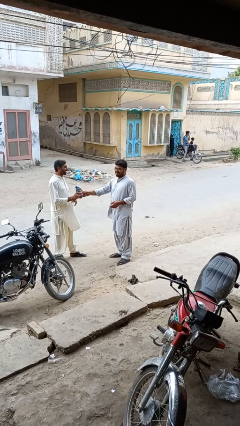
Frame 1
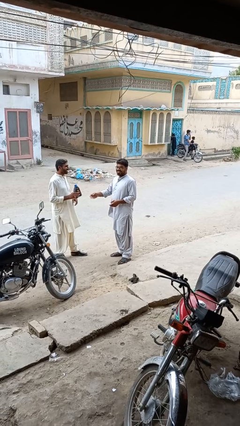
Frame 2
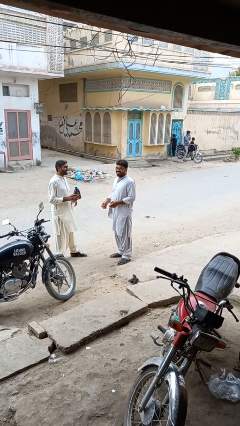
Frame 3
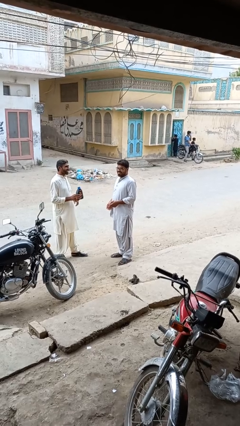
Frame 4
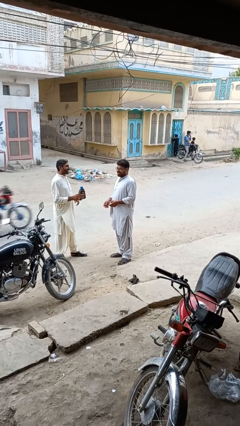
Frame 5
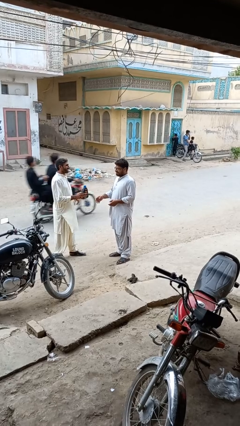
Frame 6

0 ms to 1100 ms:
person transfers object to person

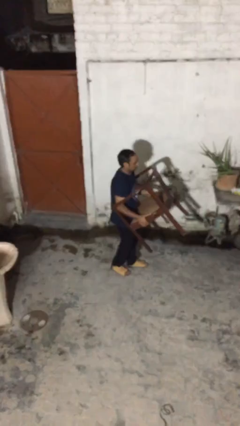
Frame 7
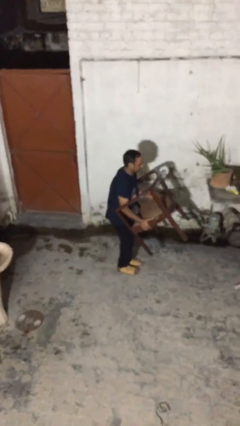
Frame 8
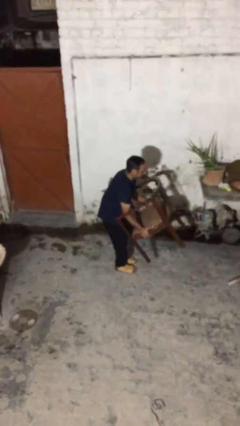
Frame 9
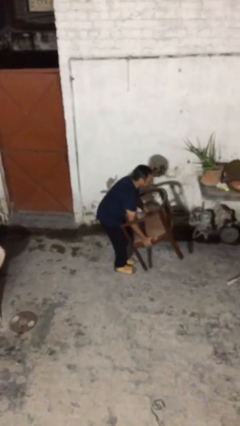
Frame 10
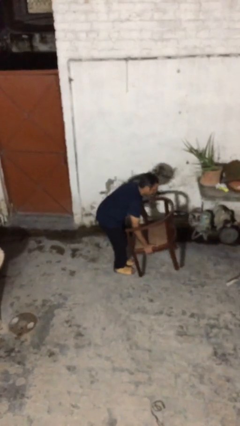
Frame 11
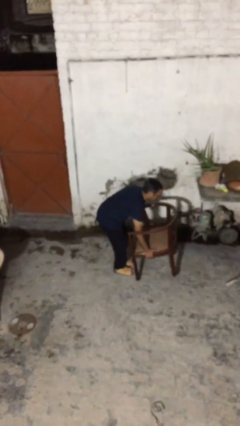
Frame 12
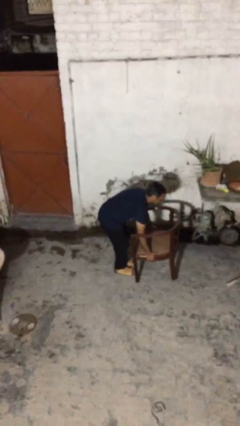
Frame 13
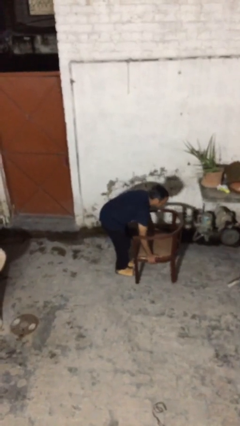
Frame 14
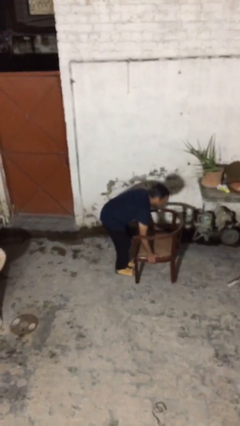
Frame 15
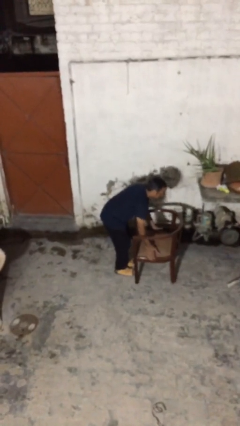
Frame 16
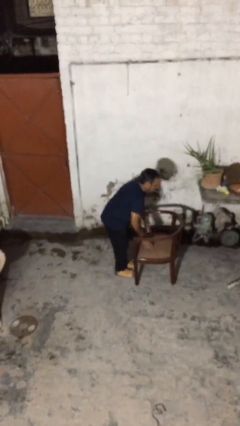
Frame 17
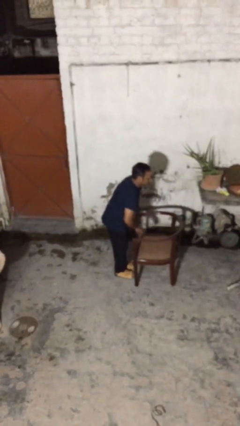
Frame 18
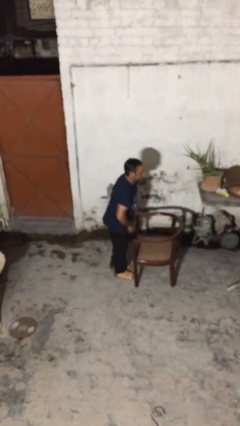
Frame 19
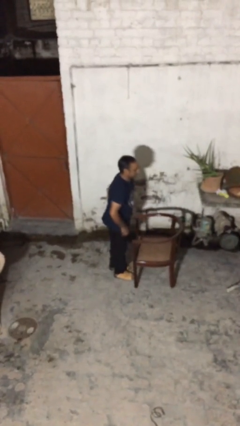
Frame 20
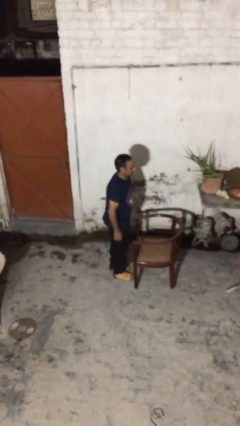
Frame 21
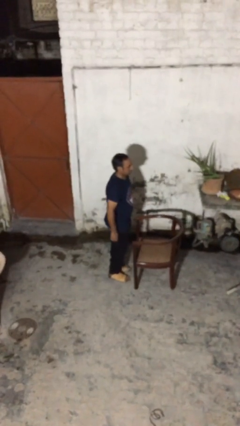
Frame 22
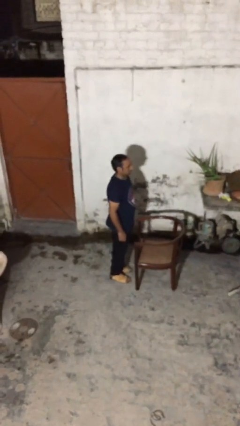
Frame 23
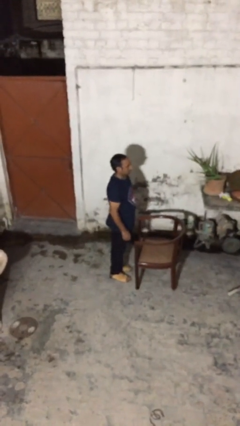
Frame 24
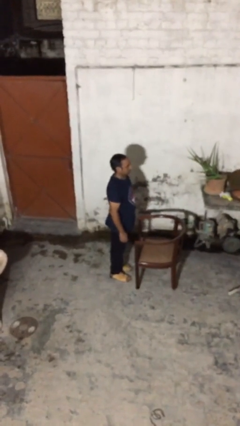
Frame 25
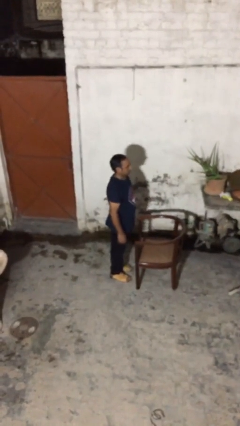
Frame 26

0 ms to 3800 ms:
person puts down object on floor

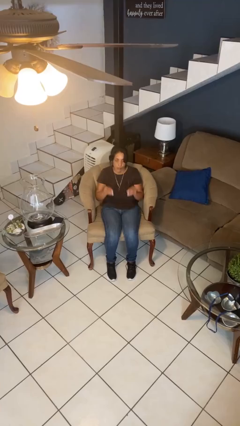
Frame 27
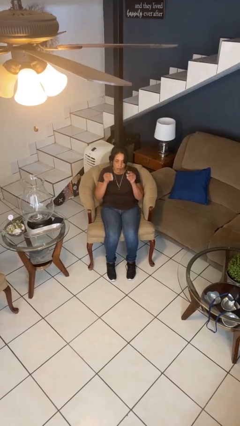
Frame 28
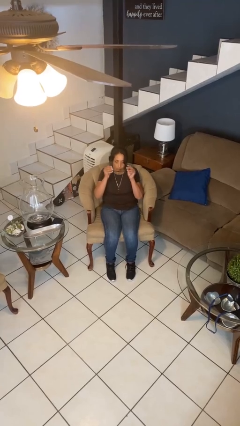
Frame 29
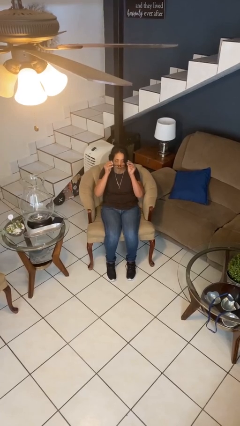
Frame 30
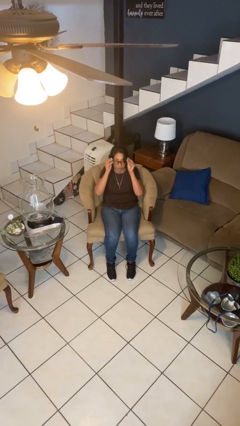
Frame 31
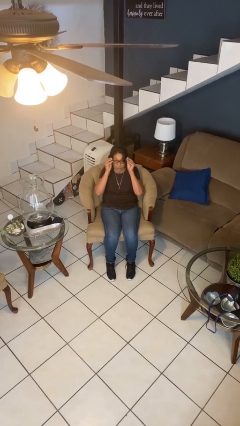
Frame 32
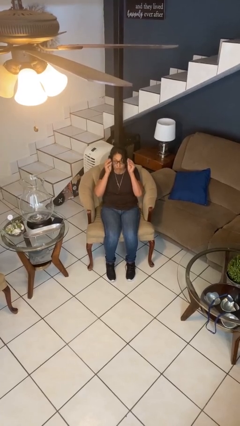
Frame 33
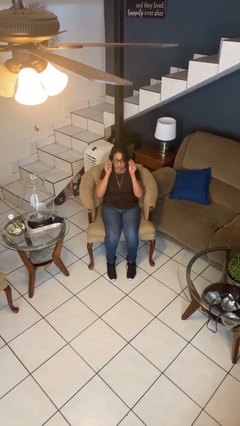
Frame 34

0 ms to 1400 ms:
person puts on glasses

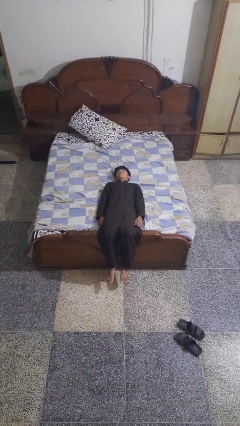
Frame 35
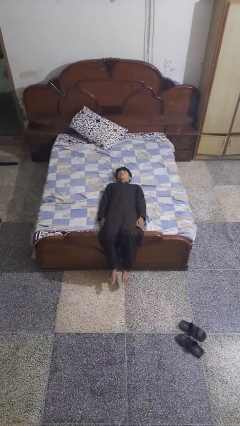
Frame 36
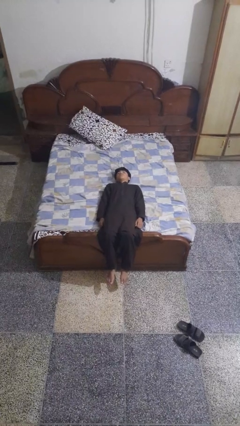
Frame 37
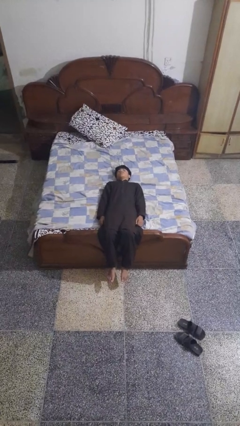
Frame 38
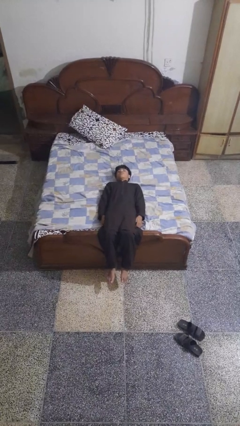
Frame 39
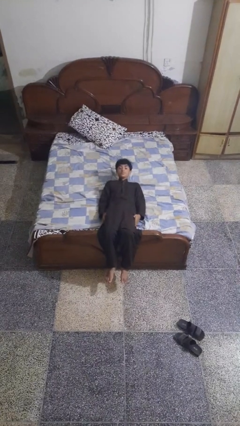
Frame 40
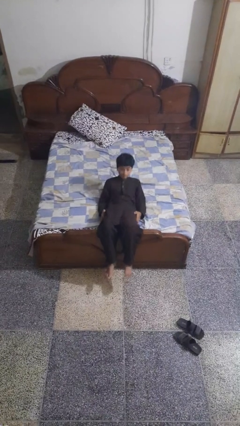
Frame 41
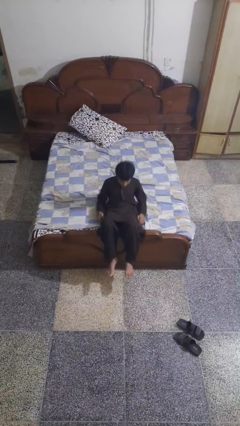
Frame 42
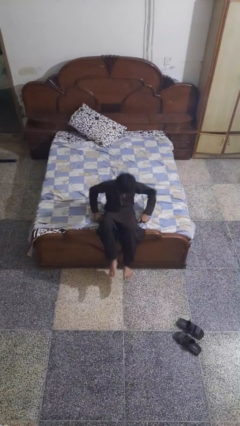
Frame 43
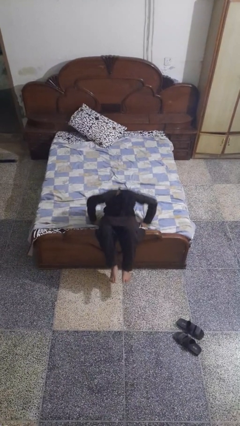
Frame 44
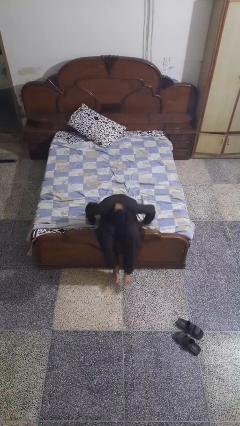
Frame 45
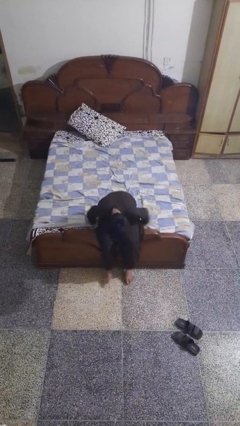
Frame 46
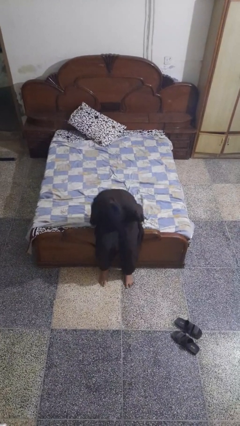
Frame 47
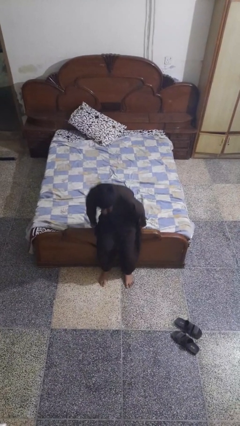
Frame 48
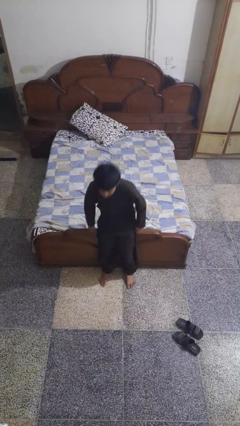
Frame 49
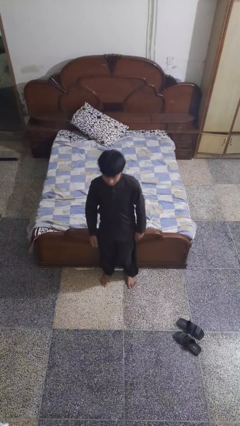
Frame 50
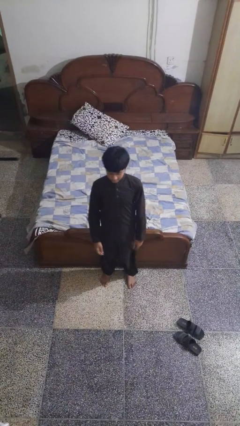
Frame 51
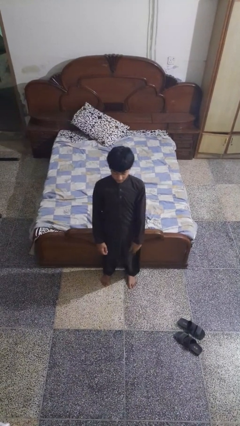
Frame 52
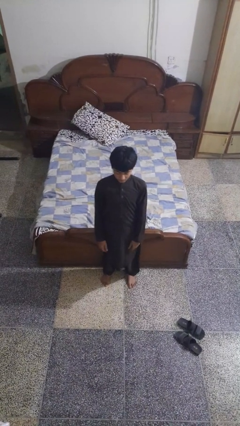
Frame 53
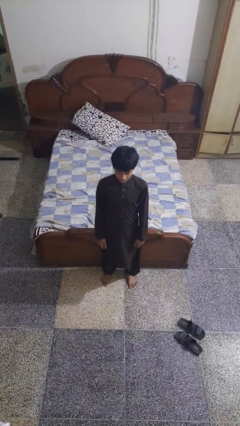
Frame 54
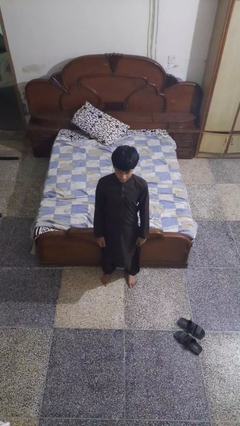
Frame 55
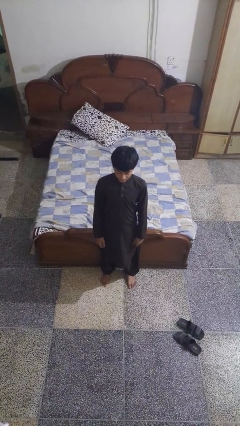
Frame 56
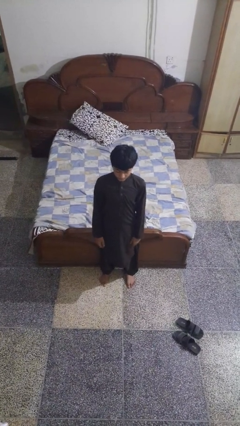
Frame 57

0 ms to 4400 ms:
person stands up

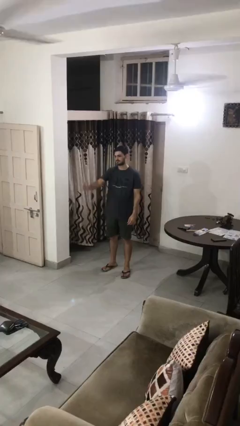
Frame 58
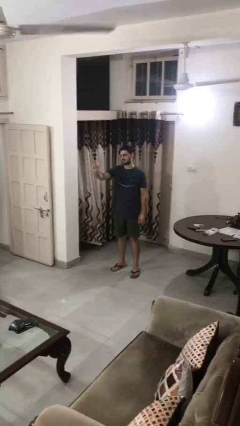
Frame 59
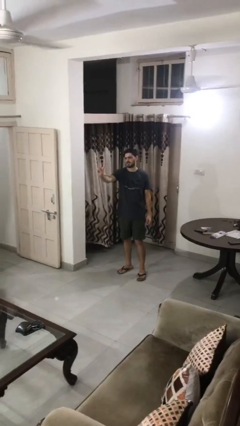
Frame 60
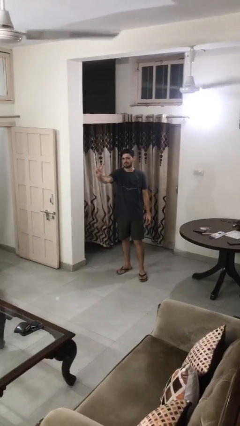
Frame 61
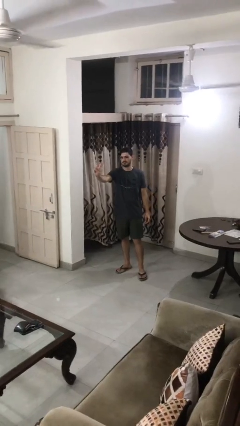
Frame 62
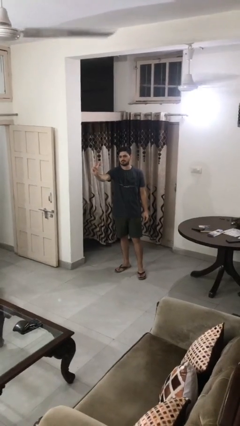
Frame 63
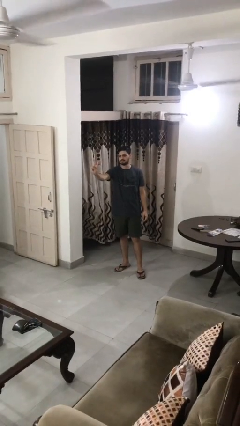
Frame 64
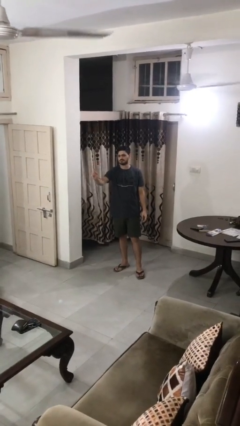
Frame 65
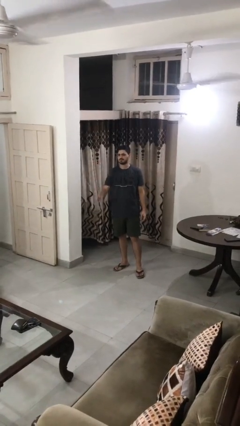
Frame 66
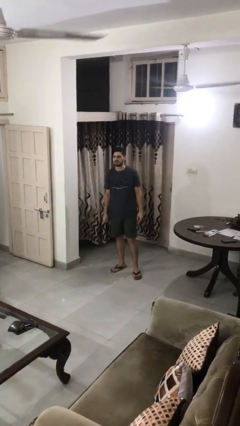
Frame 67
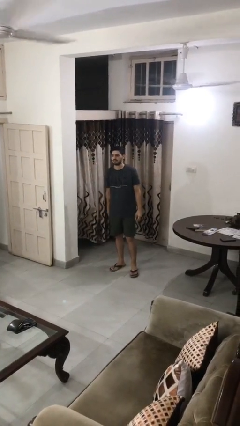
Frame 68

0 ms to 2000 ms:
person gestures peace

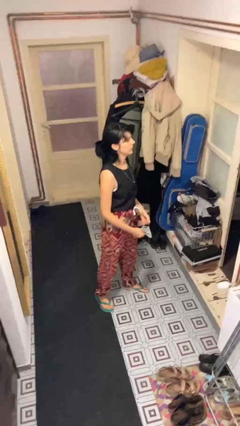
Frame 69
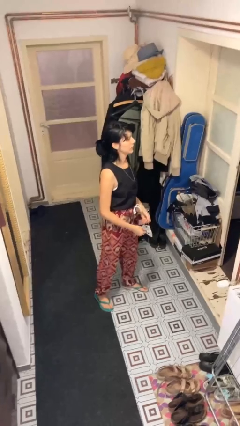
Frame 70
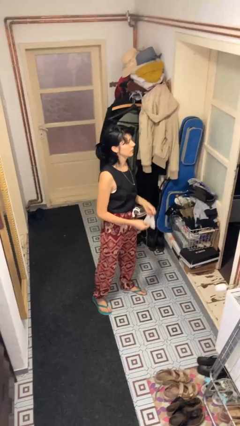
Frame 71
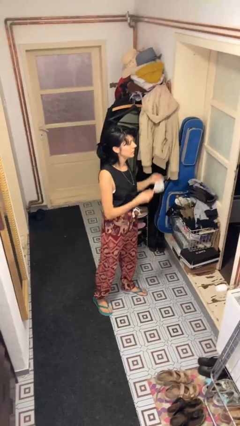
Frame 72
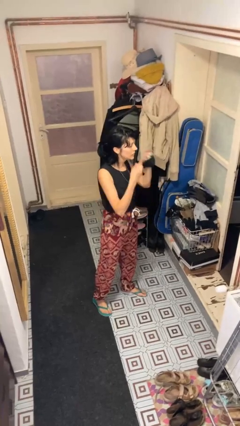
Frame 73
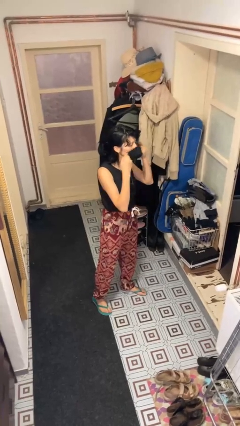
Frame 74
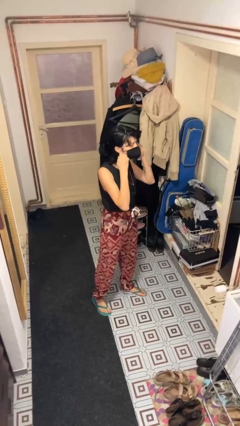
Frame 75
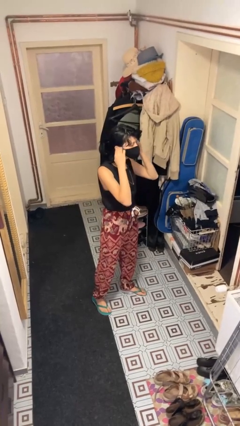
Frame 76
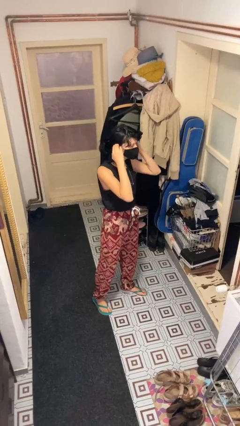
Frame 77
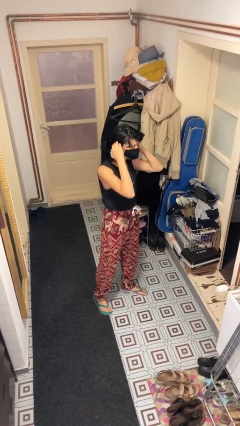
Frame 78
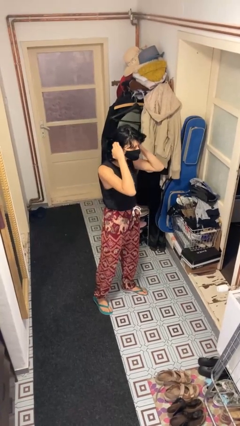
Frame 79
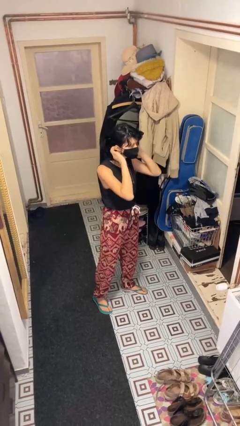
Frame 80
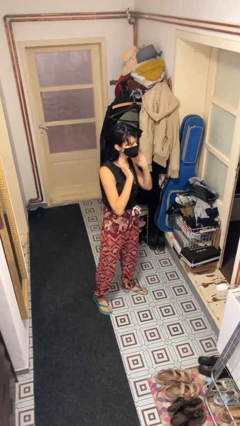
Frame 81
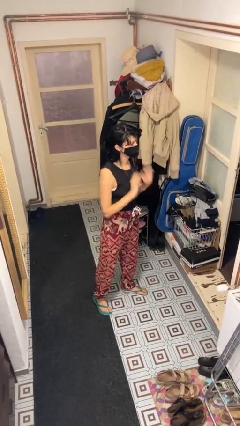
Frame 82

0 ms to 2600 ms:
person puts on facemask

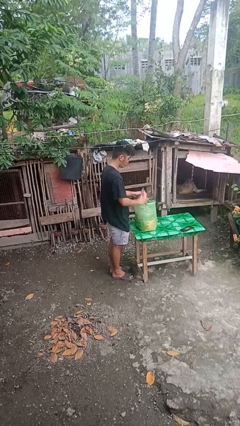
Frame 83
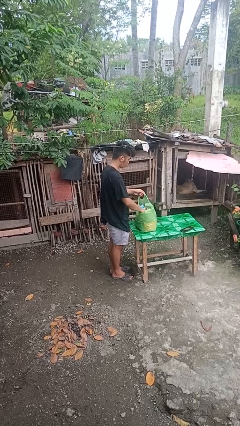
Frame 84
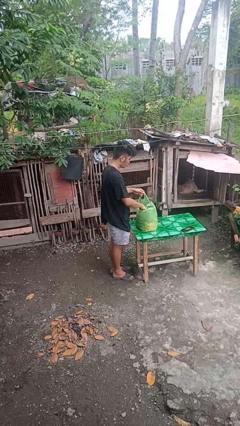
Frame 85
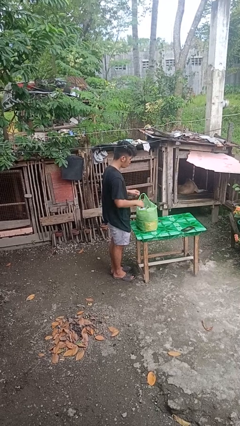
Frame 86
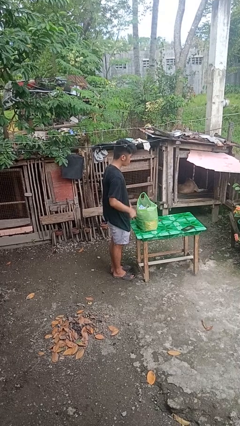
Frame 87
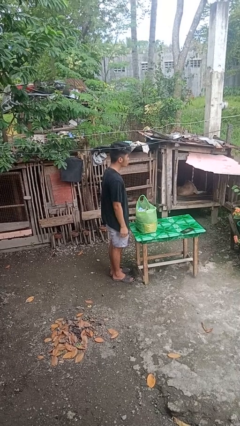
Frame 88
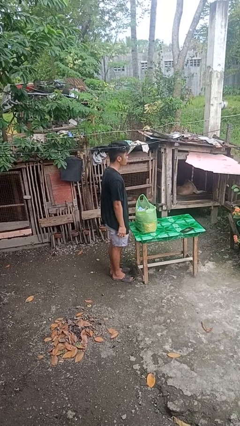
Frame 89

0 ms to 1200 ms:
person puts object into bag
